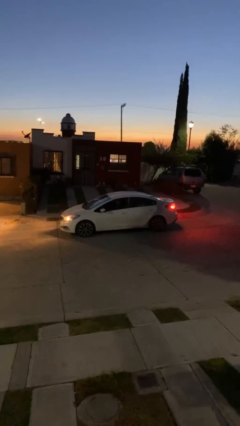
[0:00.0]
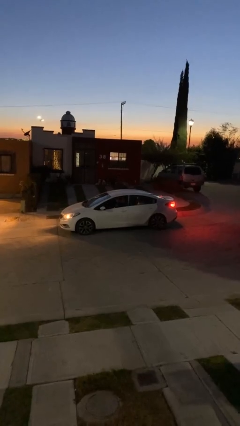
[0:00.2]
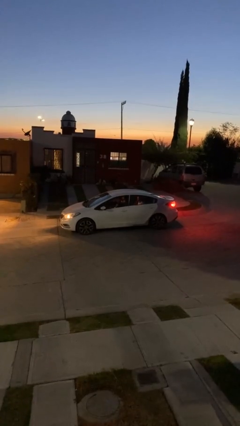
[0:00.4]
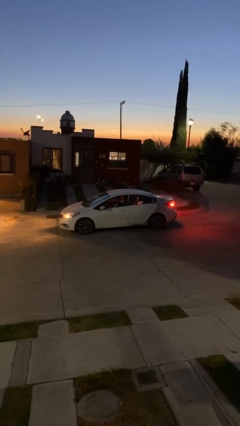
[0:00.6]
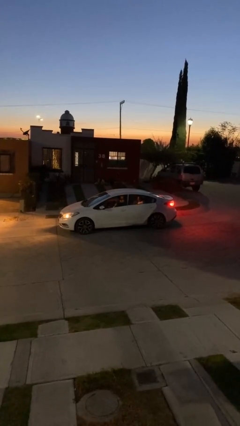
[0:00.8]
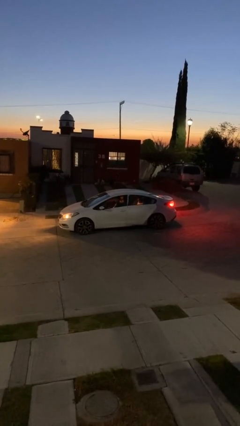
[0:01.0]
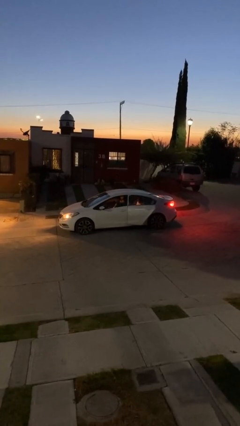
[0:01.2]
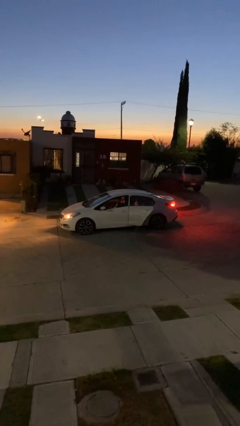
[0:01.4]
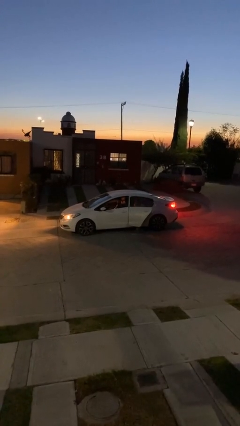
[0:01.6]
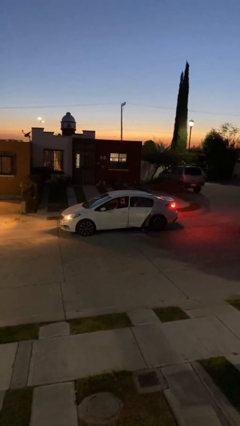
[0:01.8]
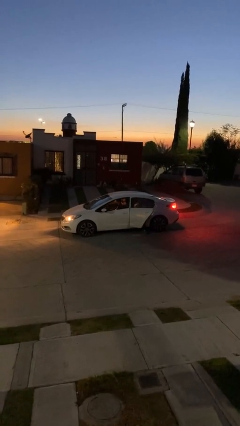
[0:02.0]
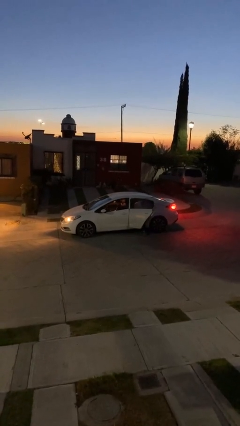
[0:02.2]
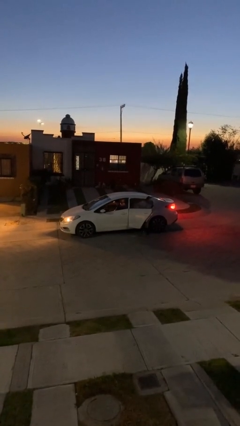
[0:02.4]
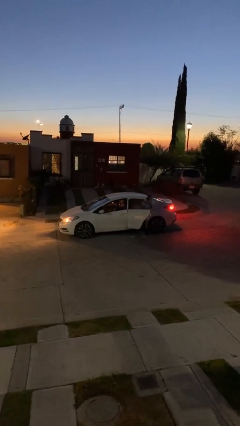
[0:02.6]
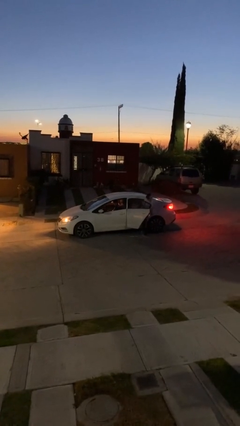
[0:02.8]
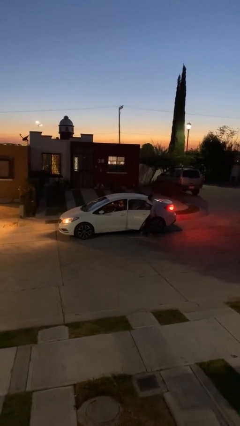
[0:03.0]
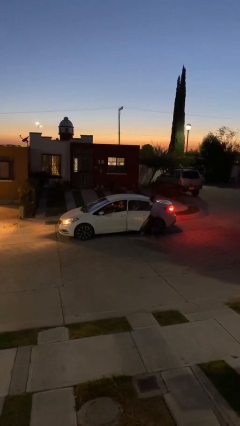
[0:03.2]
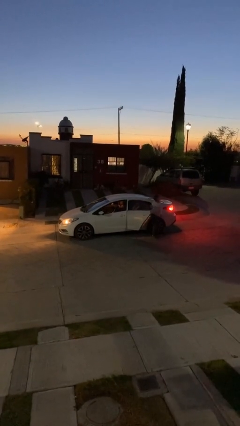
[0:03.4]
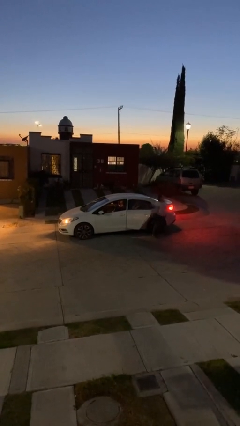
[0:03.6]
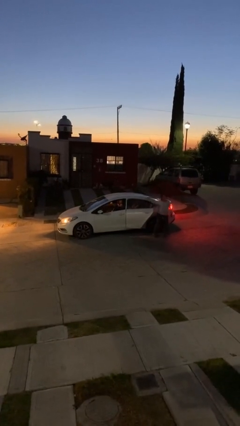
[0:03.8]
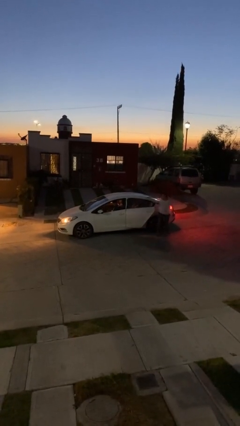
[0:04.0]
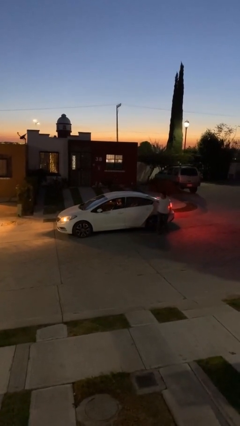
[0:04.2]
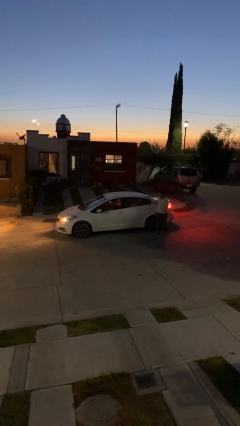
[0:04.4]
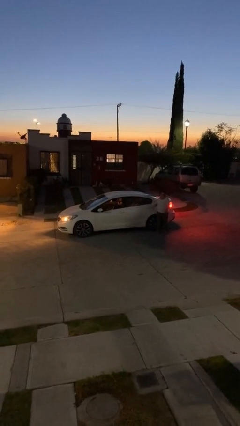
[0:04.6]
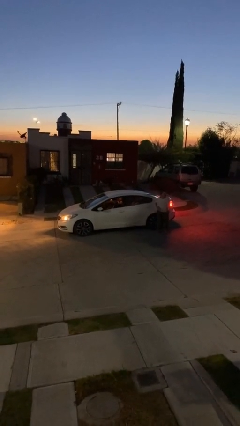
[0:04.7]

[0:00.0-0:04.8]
car drops off person

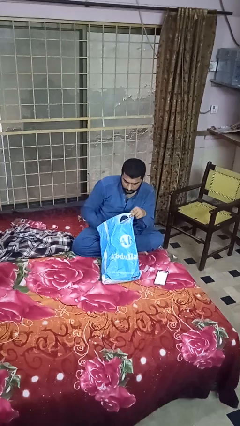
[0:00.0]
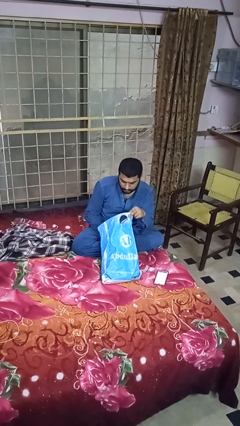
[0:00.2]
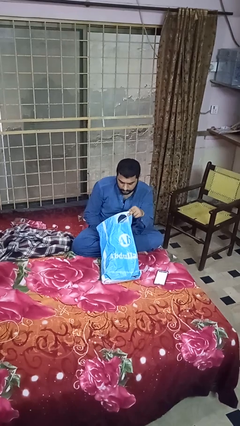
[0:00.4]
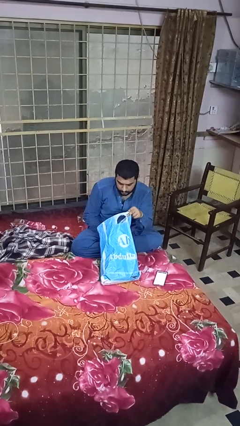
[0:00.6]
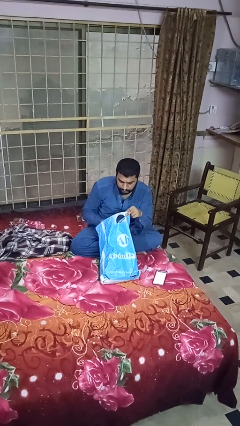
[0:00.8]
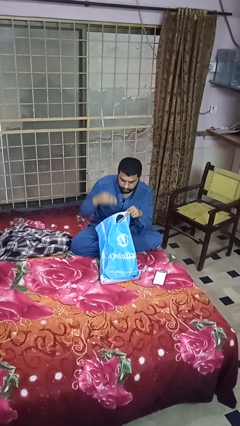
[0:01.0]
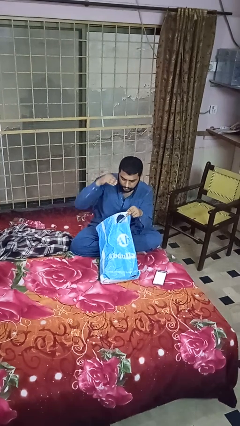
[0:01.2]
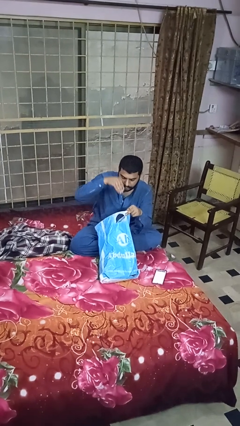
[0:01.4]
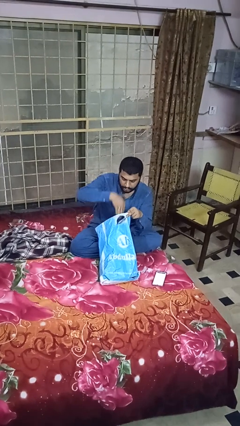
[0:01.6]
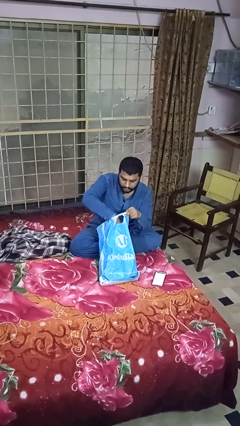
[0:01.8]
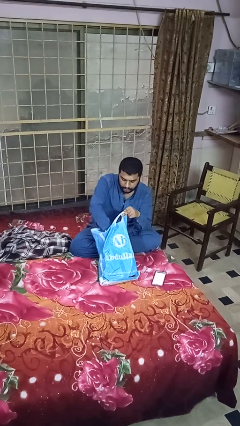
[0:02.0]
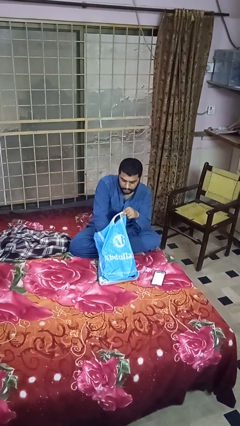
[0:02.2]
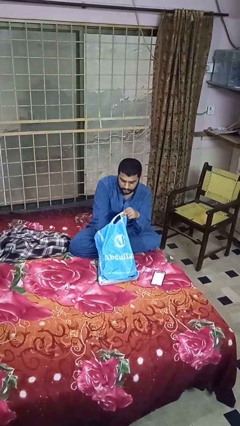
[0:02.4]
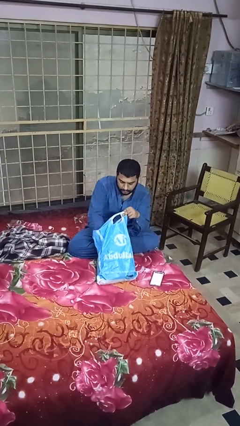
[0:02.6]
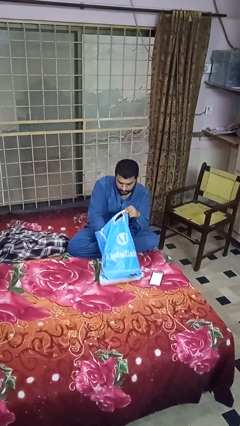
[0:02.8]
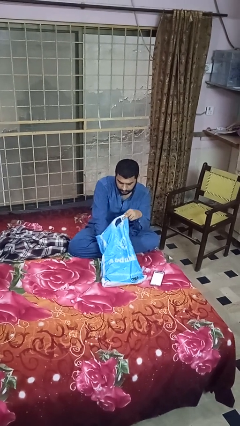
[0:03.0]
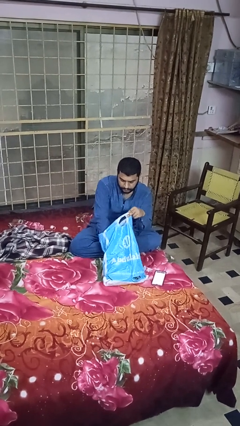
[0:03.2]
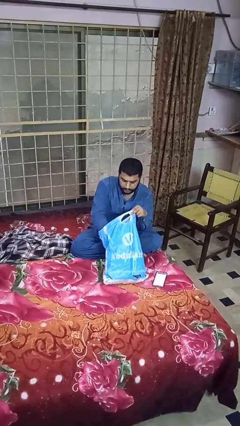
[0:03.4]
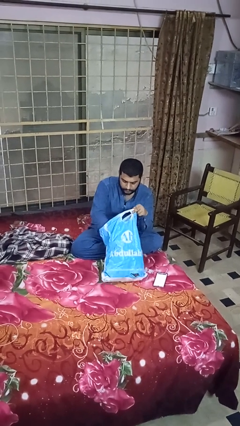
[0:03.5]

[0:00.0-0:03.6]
person searches in bag

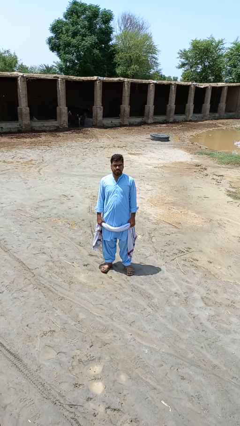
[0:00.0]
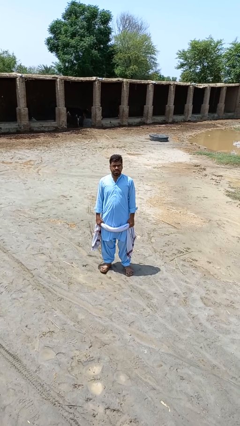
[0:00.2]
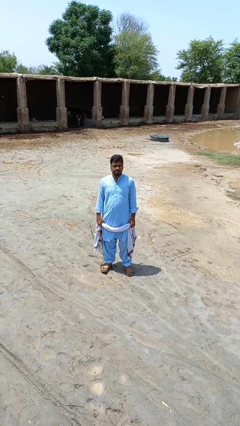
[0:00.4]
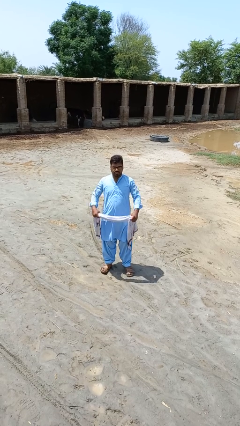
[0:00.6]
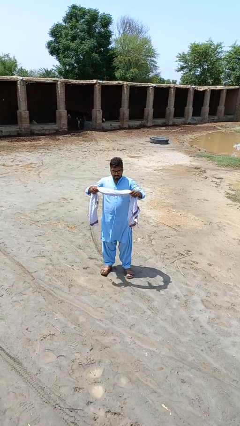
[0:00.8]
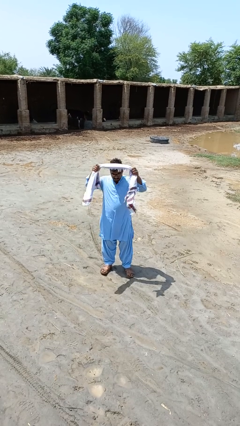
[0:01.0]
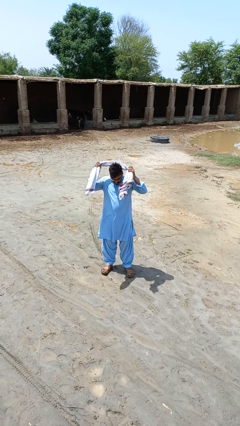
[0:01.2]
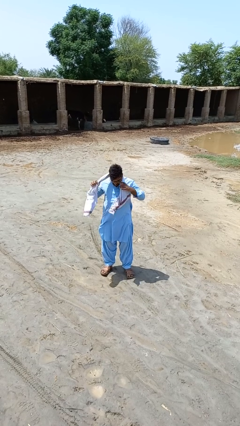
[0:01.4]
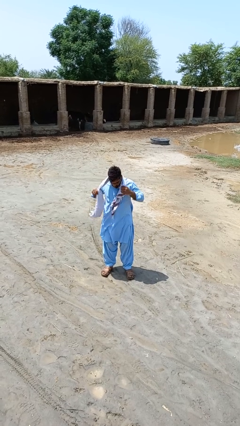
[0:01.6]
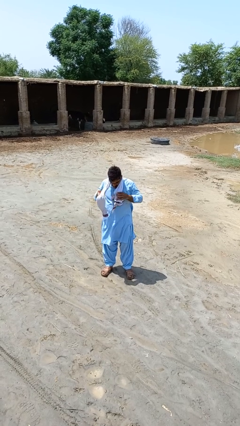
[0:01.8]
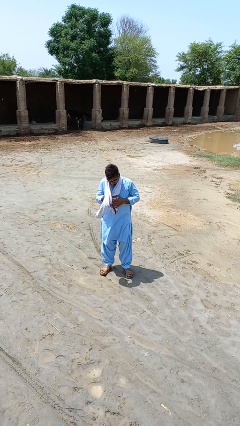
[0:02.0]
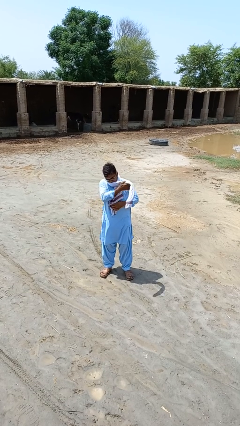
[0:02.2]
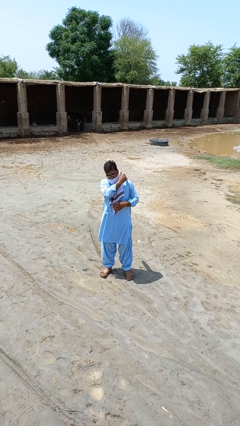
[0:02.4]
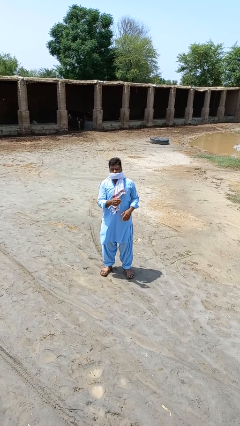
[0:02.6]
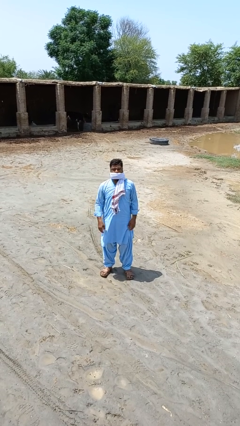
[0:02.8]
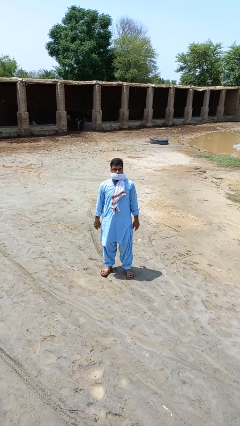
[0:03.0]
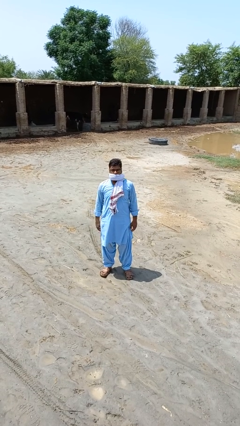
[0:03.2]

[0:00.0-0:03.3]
person puts on scarf

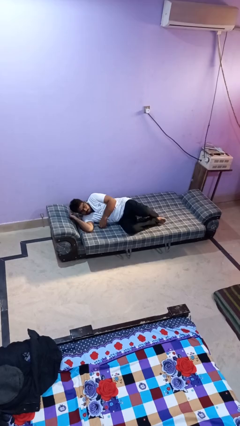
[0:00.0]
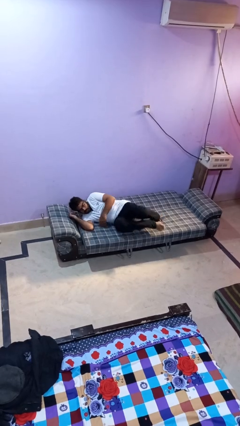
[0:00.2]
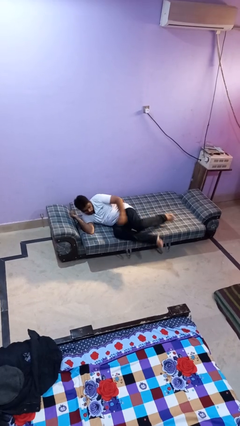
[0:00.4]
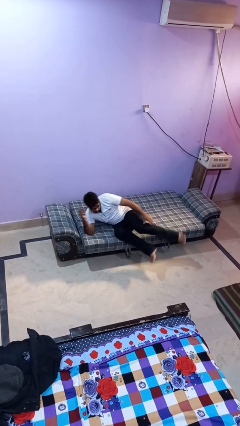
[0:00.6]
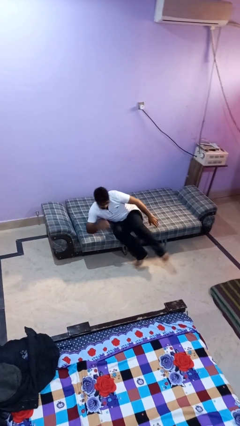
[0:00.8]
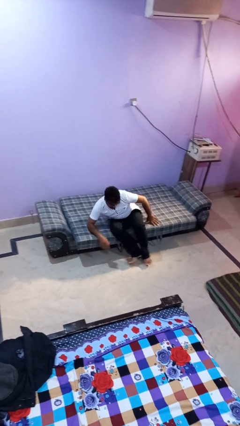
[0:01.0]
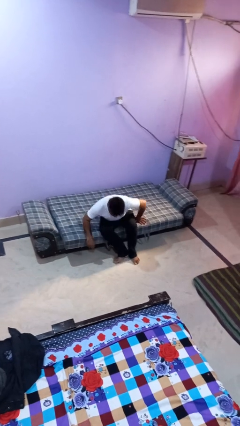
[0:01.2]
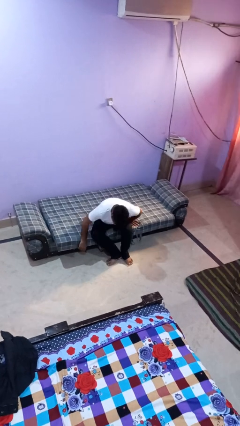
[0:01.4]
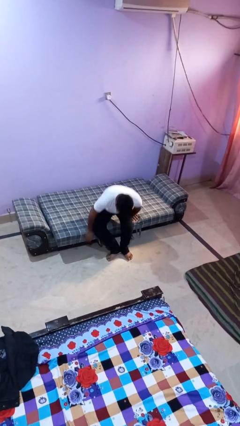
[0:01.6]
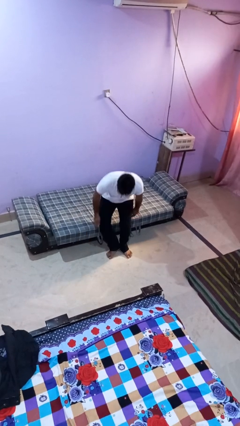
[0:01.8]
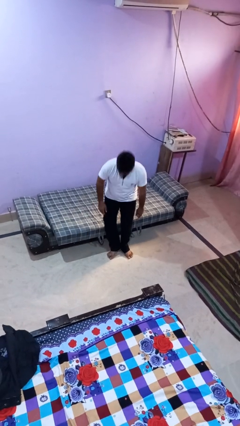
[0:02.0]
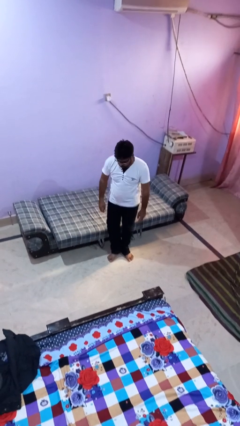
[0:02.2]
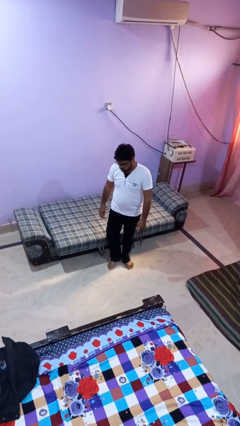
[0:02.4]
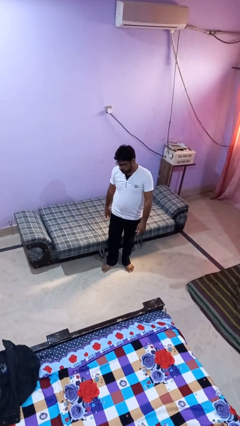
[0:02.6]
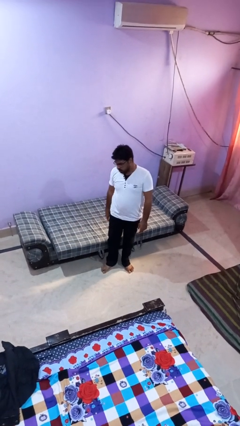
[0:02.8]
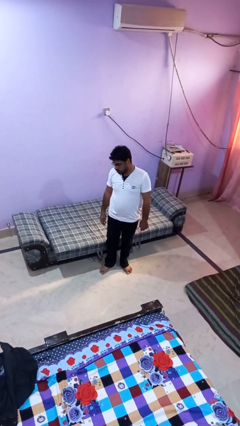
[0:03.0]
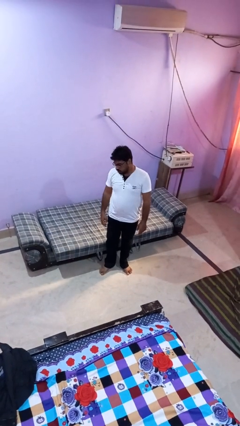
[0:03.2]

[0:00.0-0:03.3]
person stands up

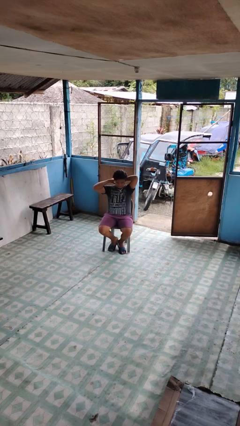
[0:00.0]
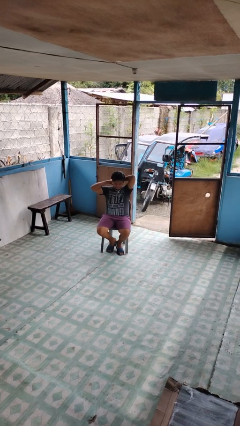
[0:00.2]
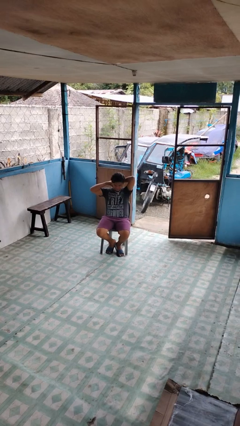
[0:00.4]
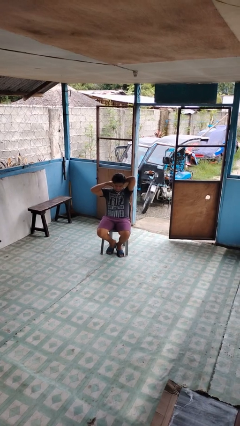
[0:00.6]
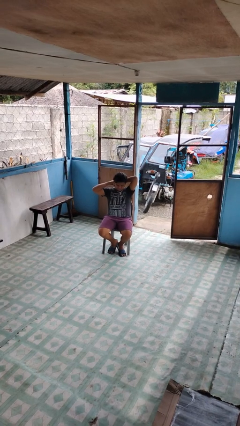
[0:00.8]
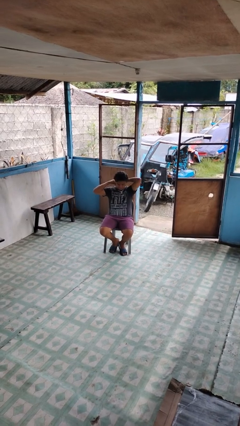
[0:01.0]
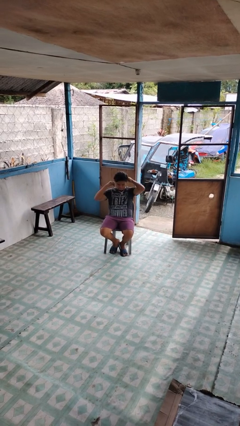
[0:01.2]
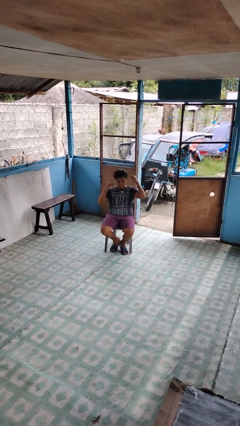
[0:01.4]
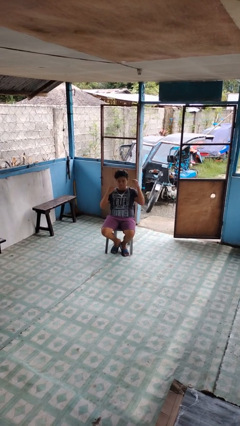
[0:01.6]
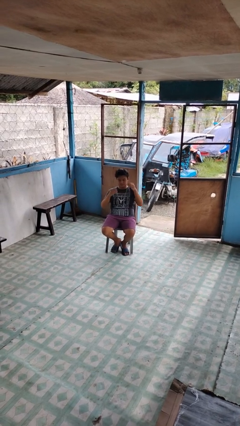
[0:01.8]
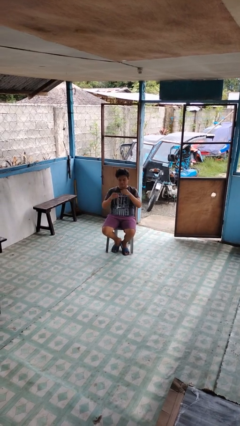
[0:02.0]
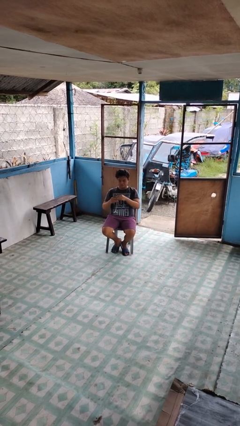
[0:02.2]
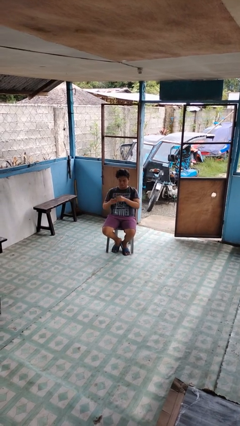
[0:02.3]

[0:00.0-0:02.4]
person takes off necklace

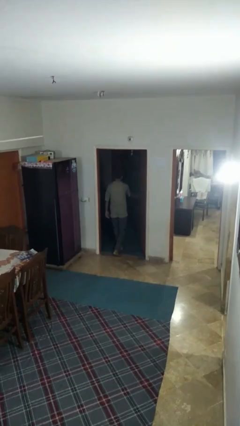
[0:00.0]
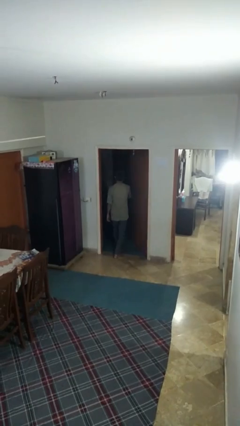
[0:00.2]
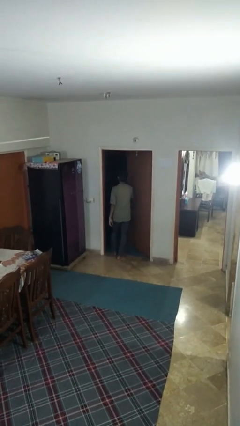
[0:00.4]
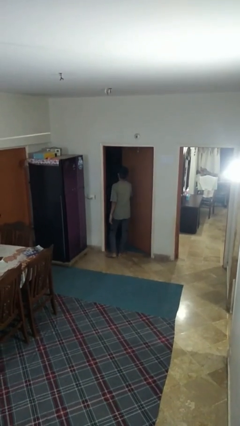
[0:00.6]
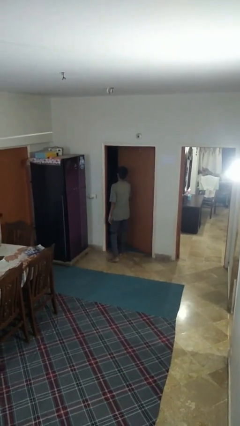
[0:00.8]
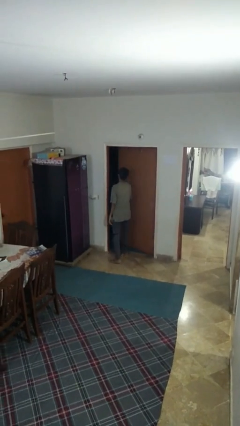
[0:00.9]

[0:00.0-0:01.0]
person closes facility door
